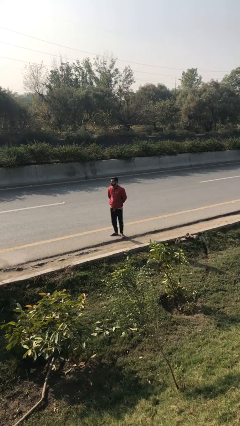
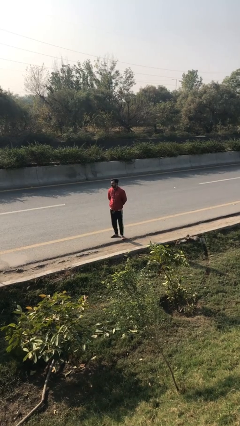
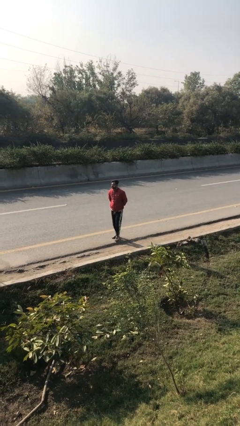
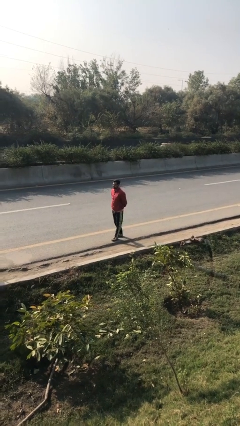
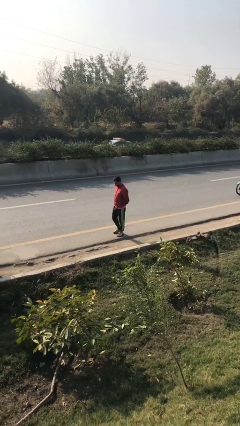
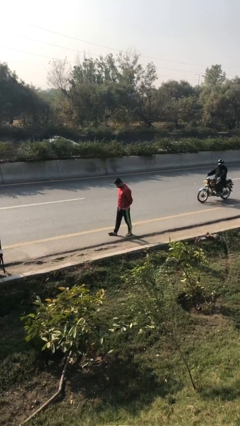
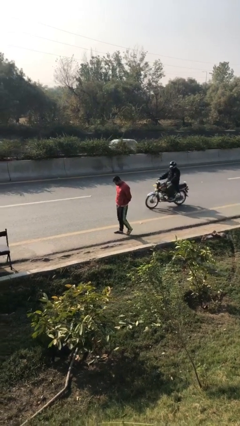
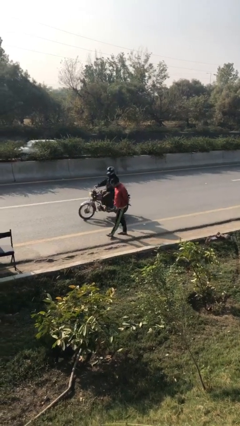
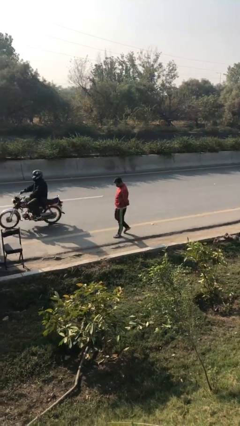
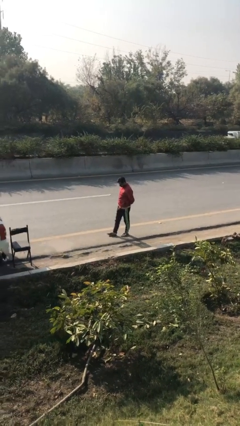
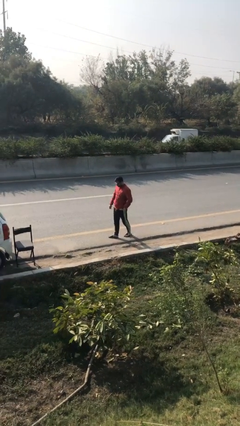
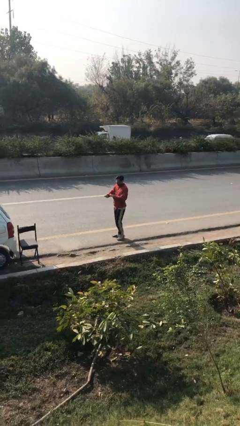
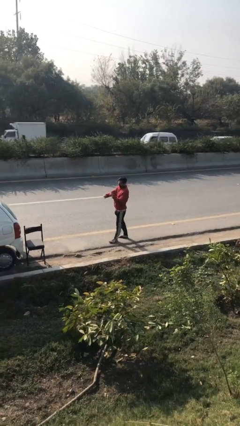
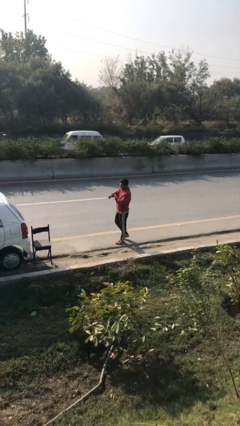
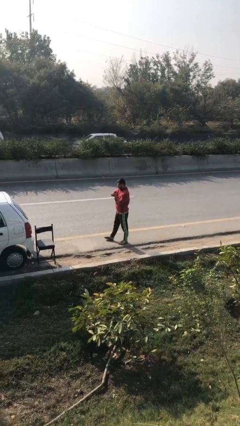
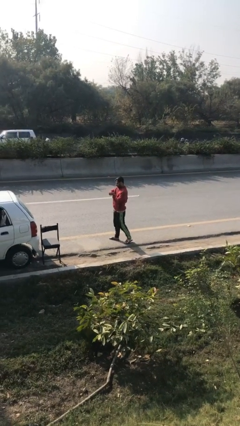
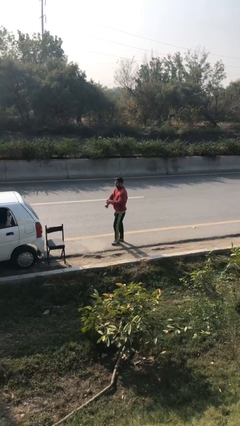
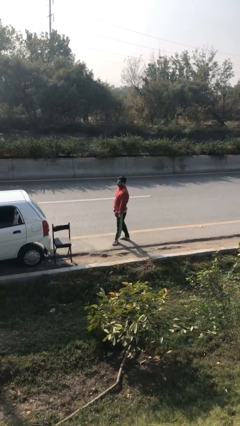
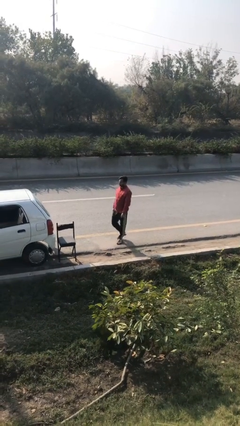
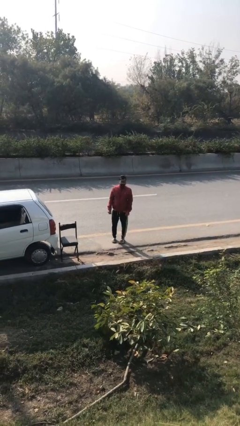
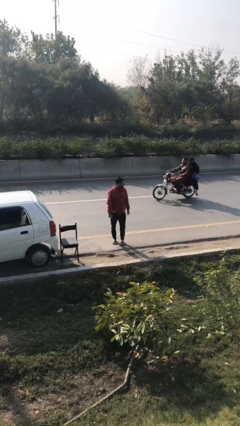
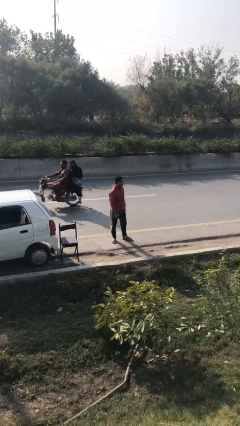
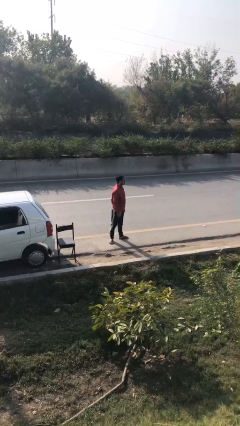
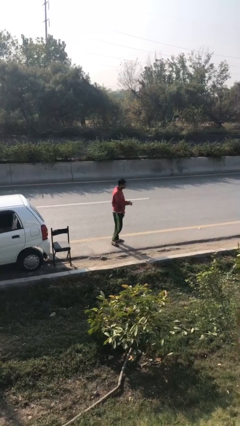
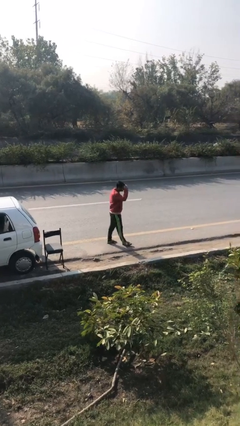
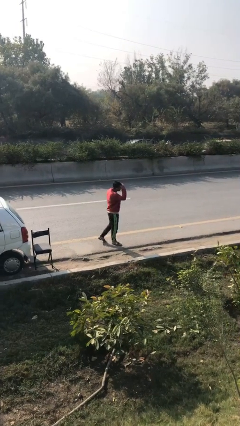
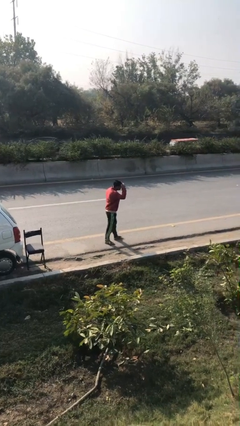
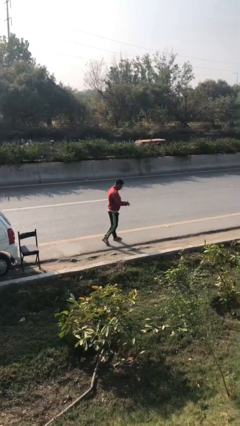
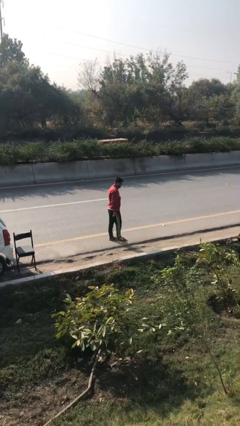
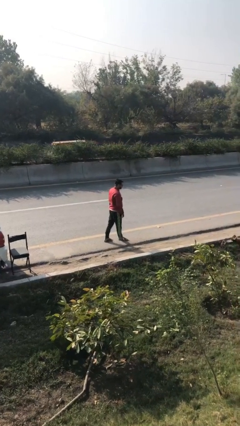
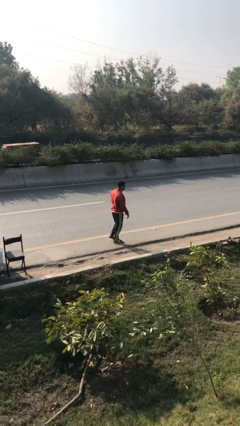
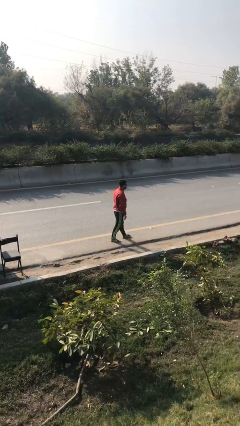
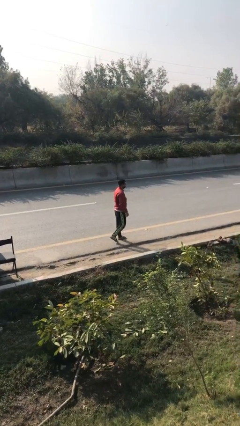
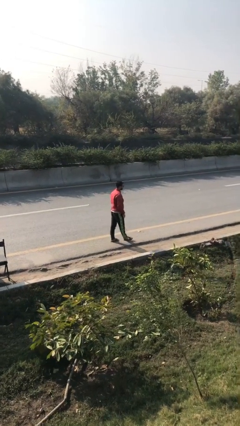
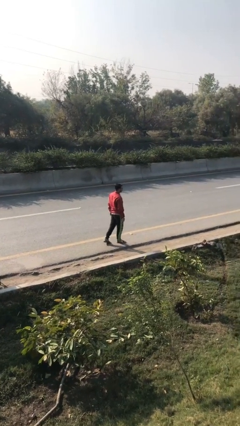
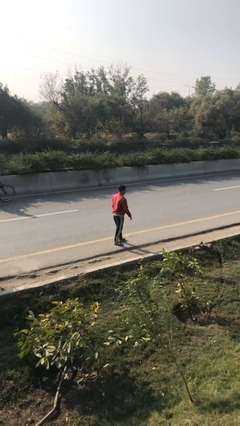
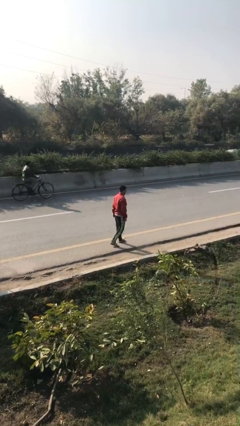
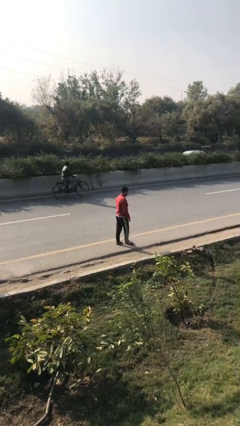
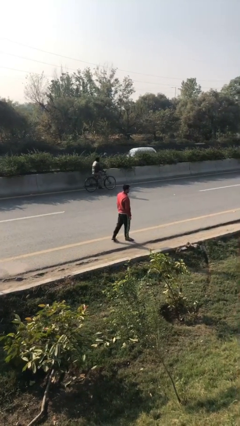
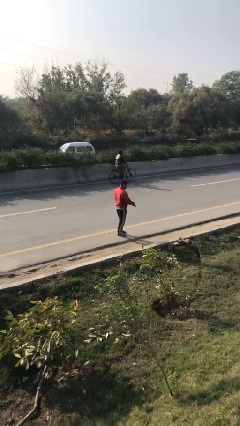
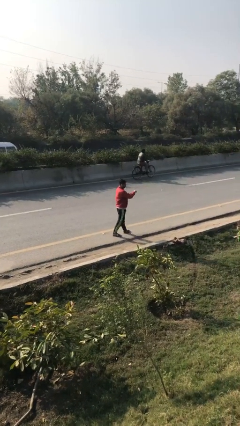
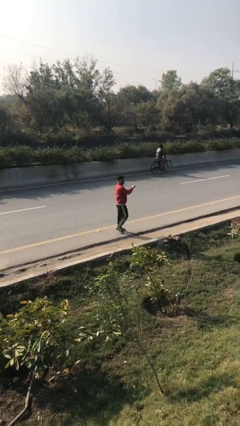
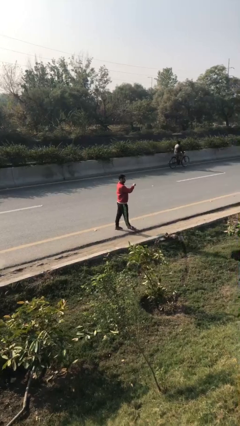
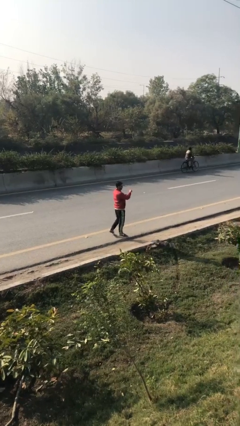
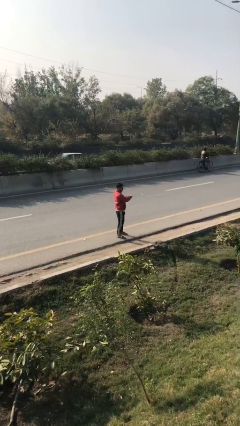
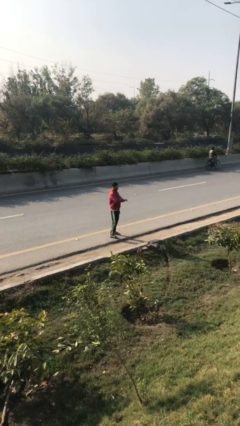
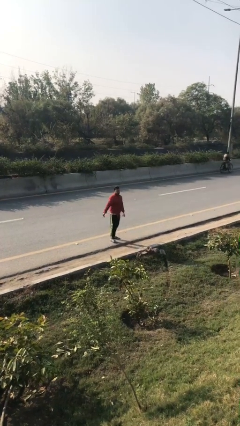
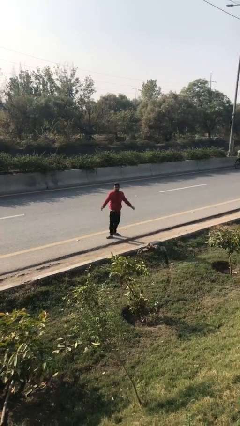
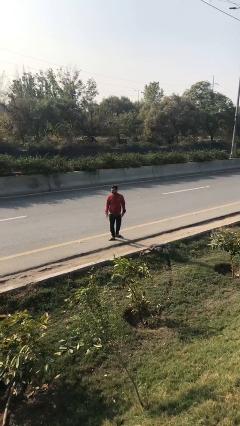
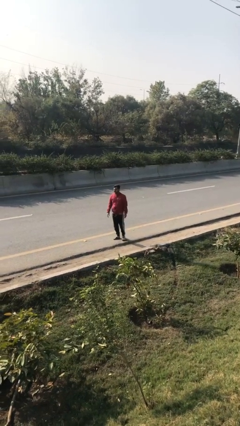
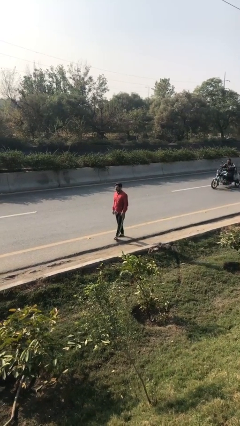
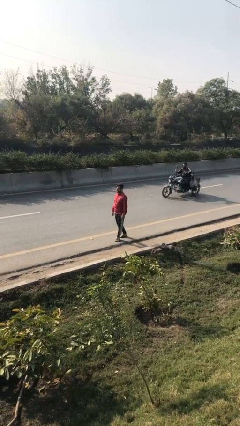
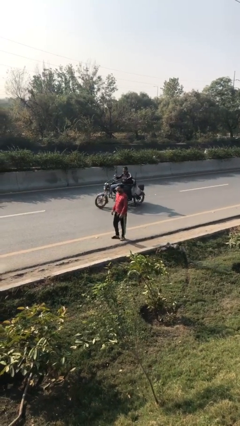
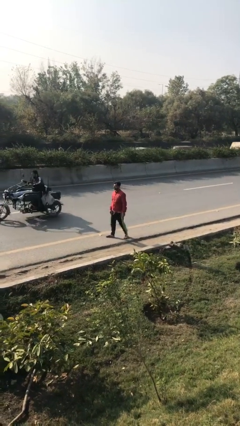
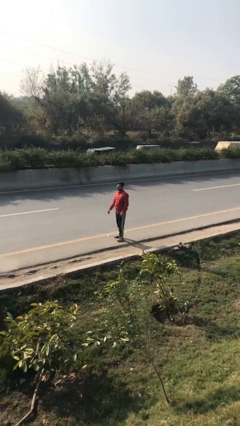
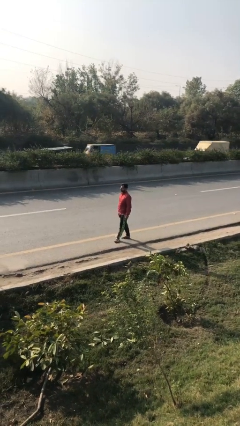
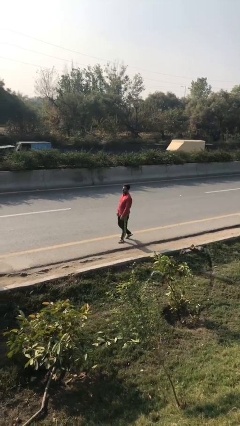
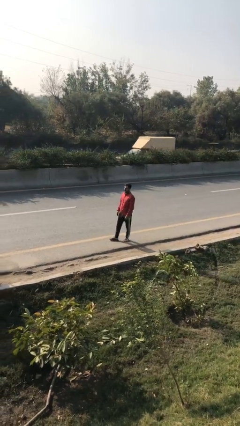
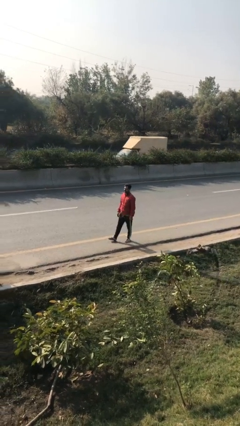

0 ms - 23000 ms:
person walks

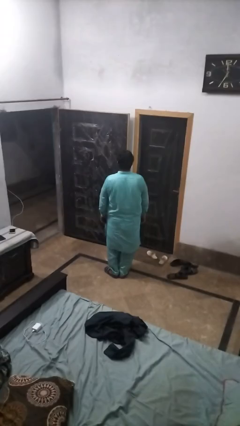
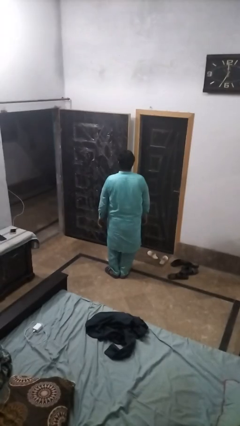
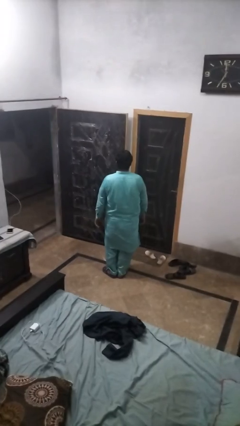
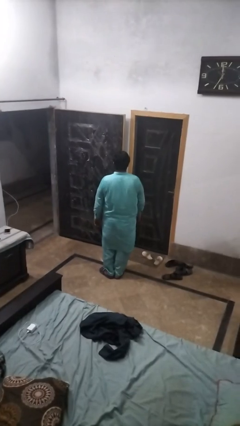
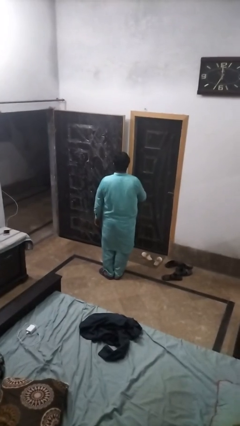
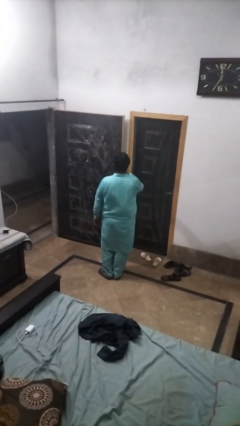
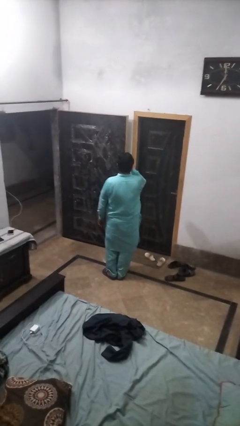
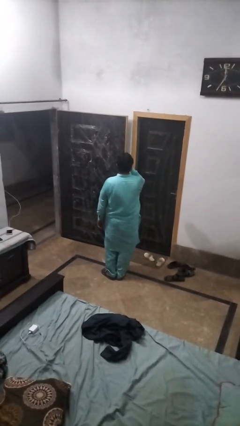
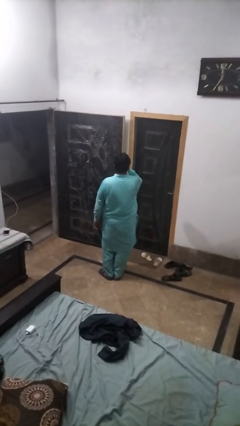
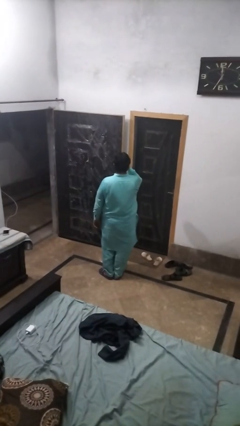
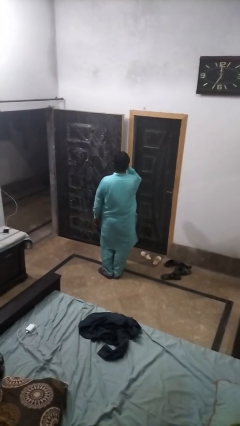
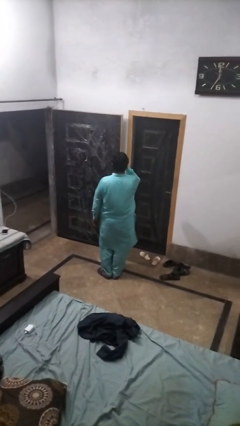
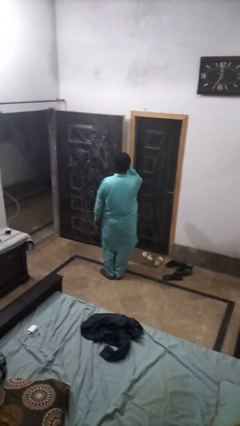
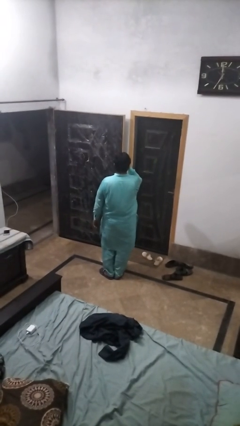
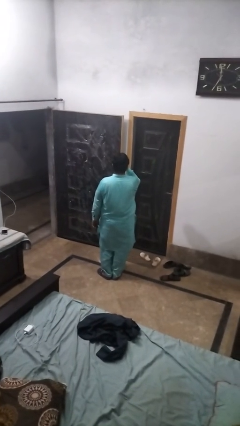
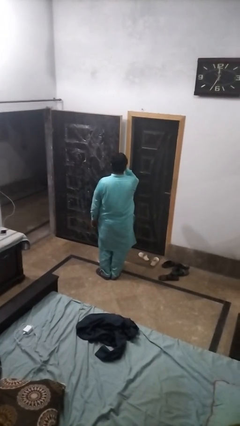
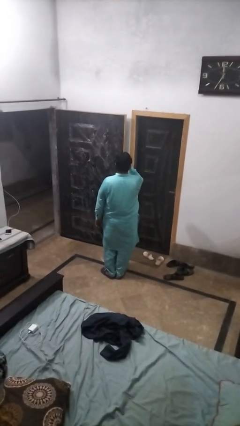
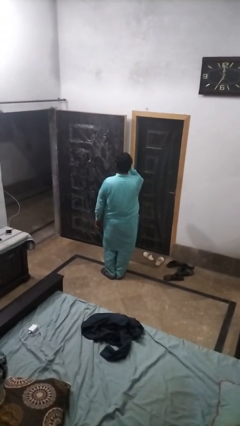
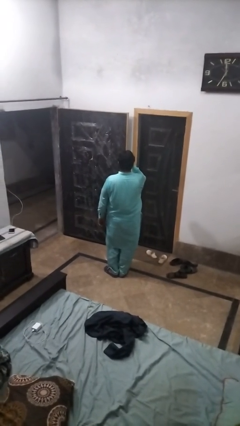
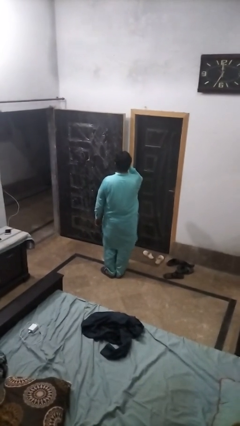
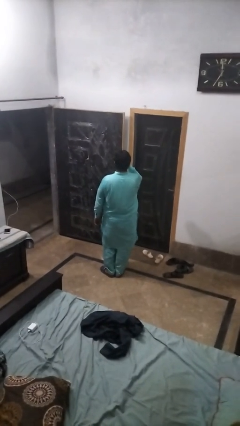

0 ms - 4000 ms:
person licks fingers

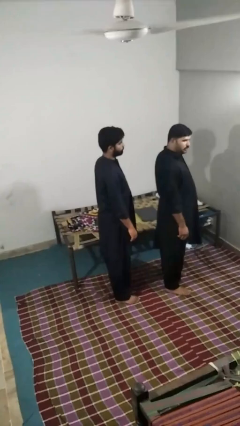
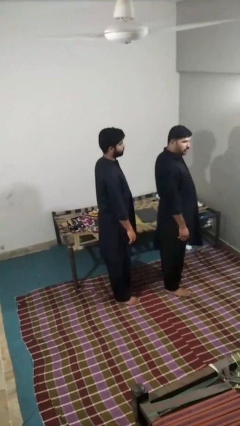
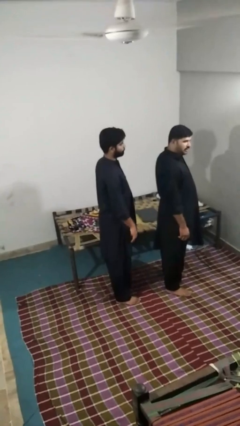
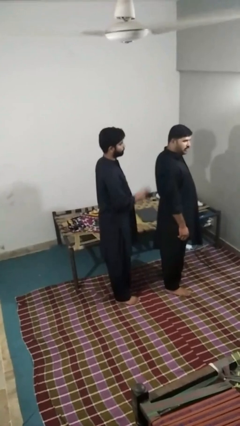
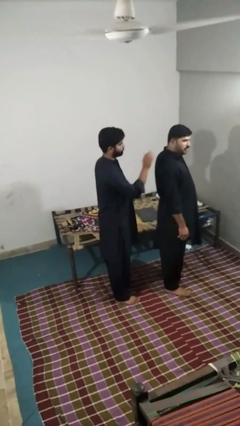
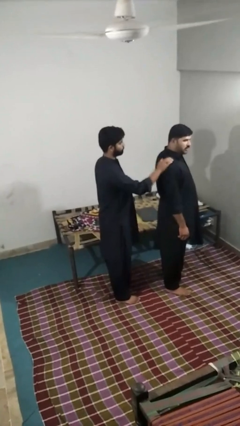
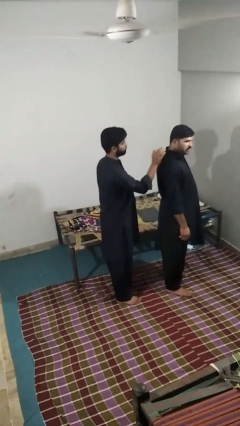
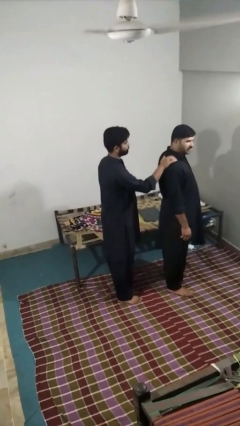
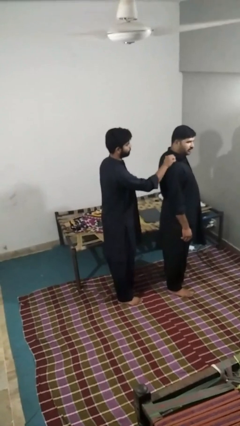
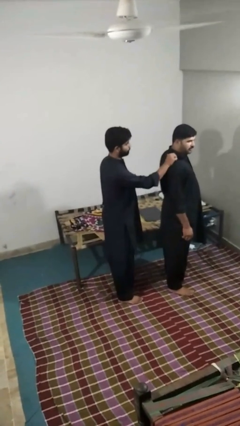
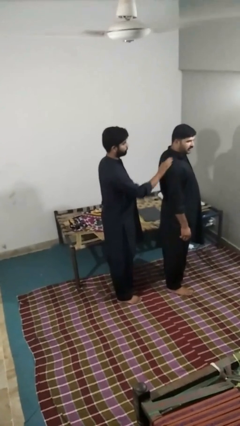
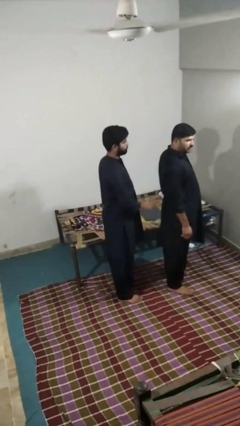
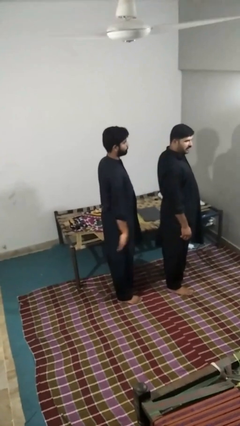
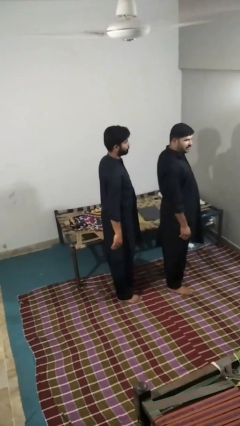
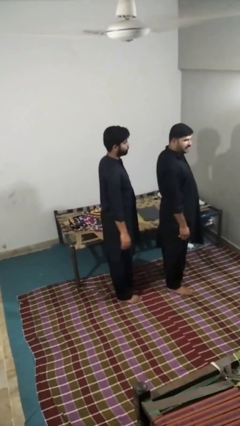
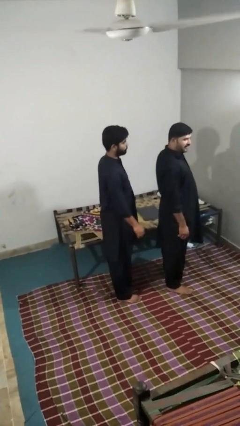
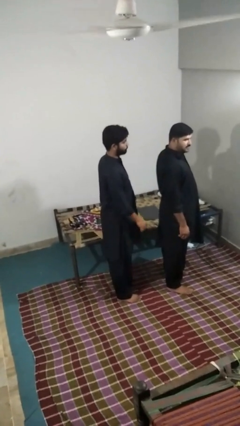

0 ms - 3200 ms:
person touches back of person
